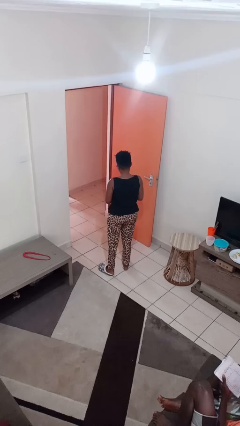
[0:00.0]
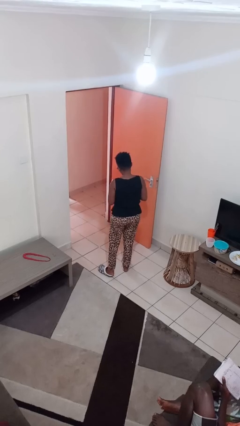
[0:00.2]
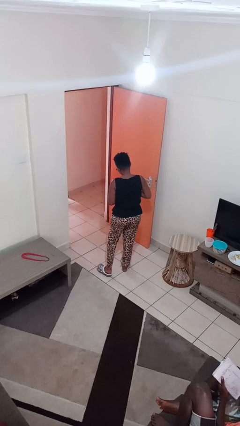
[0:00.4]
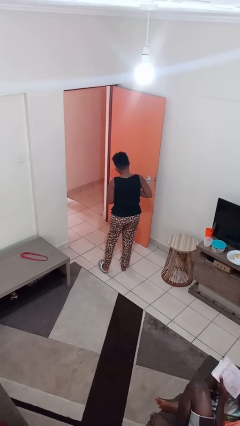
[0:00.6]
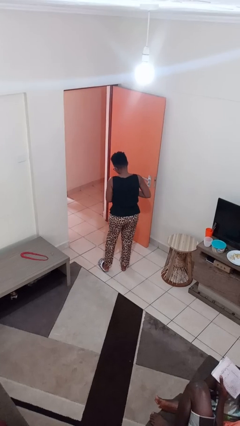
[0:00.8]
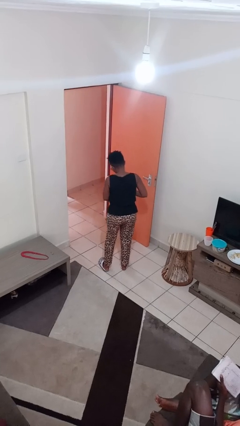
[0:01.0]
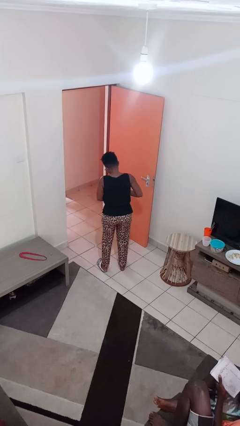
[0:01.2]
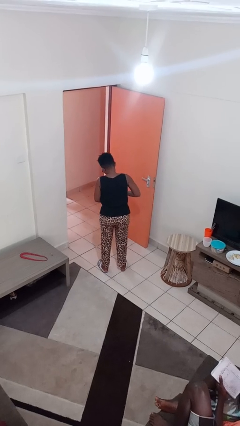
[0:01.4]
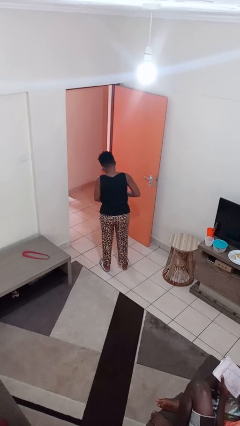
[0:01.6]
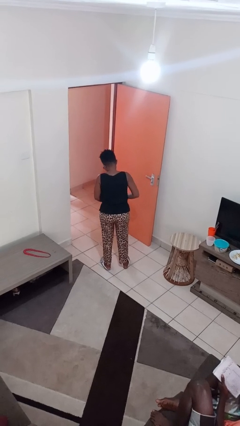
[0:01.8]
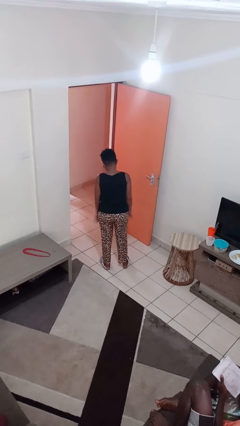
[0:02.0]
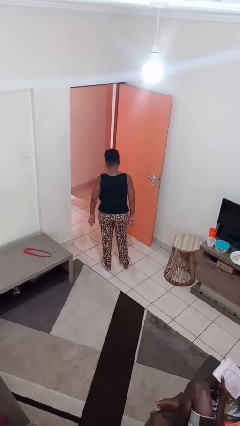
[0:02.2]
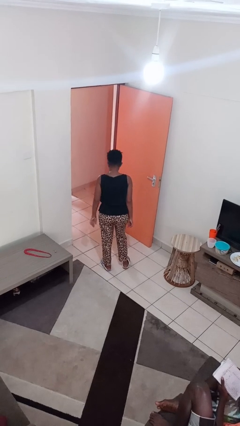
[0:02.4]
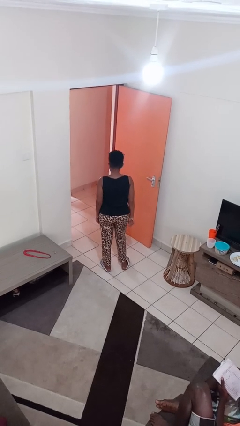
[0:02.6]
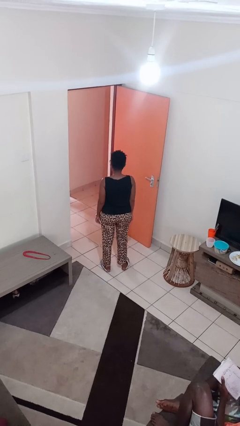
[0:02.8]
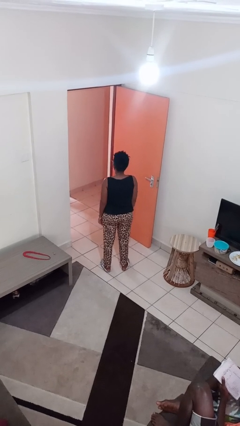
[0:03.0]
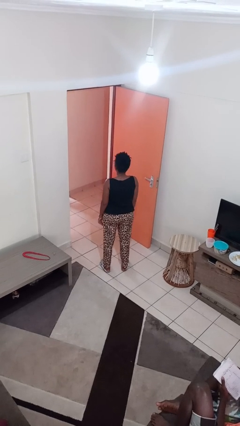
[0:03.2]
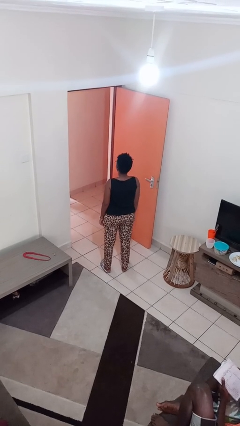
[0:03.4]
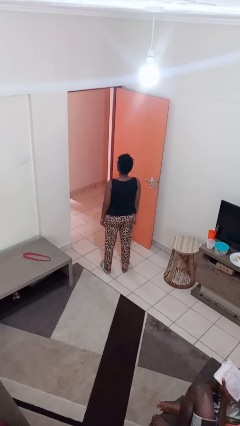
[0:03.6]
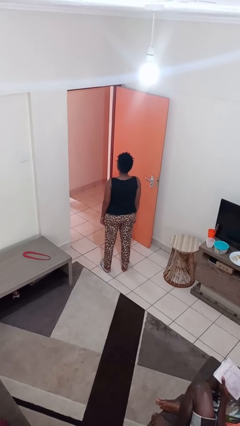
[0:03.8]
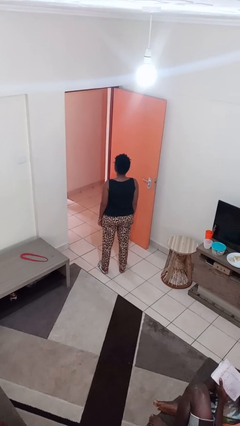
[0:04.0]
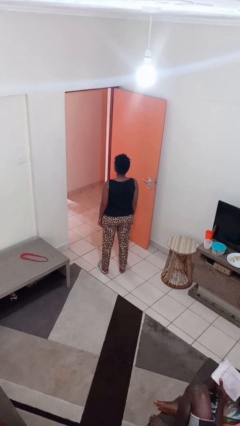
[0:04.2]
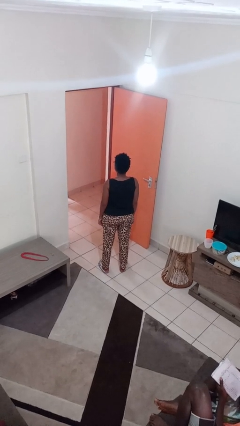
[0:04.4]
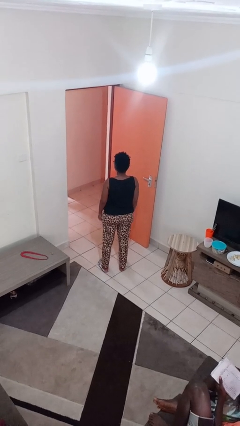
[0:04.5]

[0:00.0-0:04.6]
person puts on wristwatch

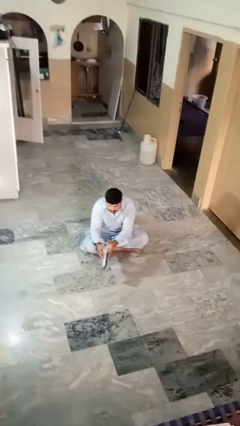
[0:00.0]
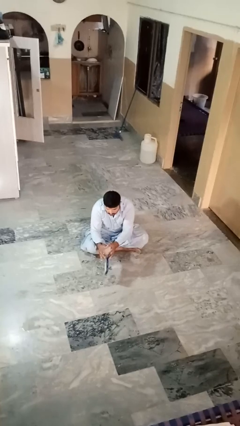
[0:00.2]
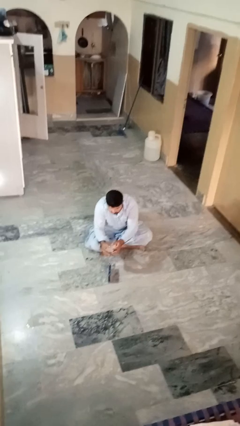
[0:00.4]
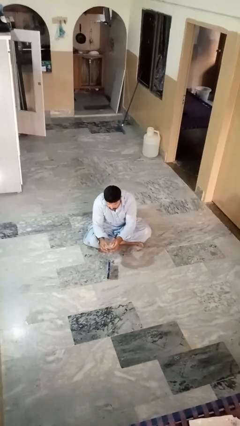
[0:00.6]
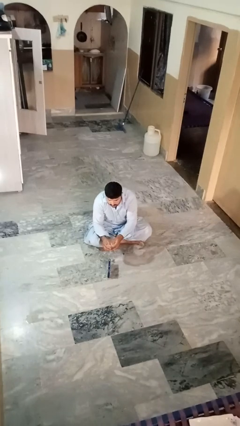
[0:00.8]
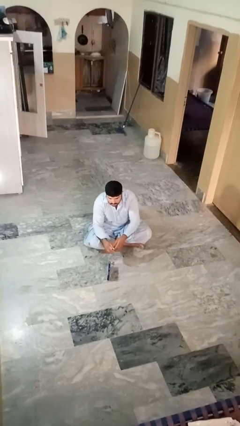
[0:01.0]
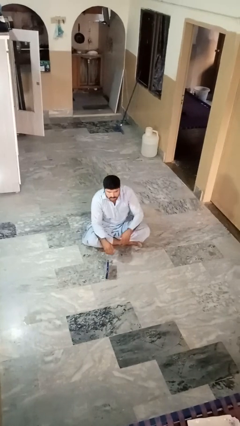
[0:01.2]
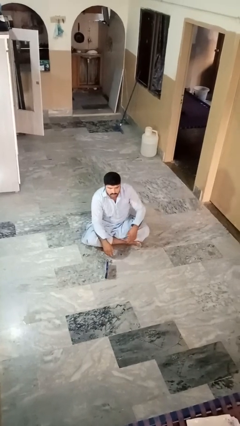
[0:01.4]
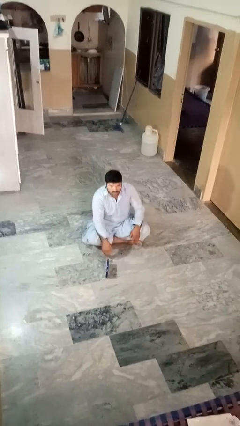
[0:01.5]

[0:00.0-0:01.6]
person catches dropped object

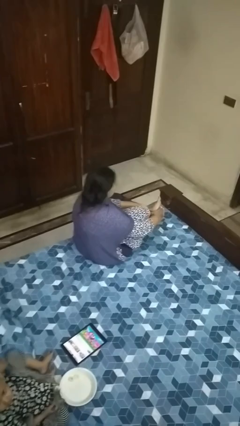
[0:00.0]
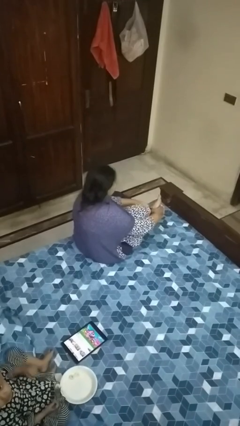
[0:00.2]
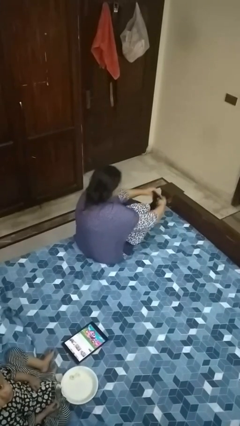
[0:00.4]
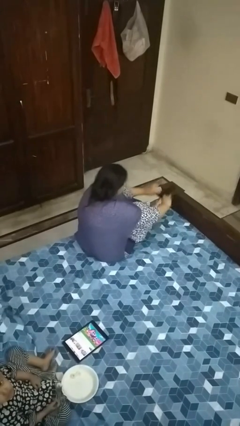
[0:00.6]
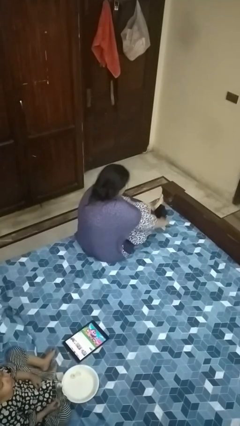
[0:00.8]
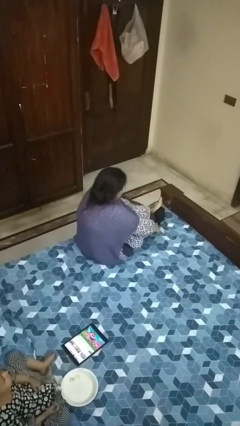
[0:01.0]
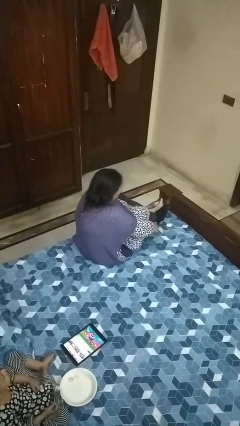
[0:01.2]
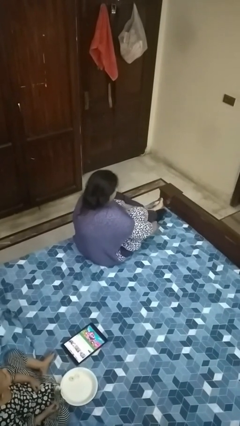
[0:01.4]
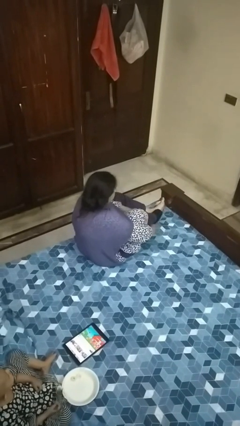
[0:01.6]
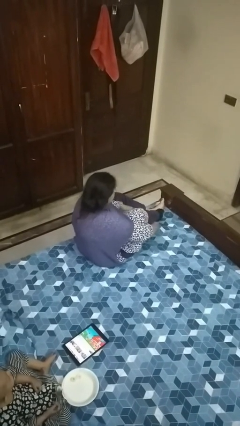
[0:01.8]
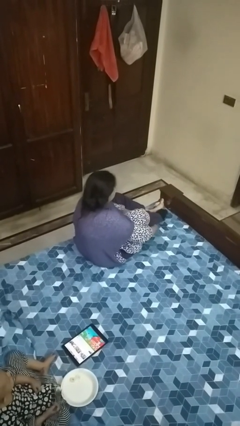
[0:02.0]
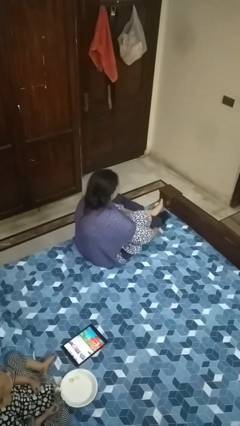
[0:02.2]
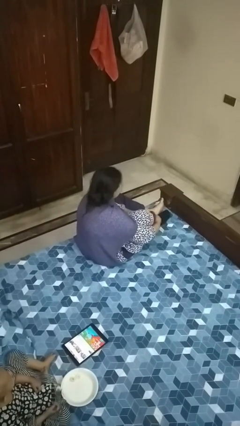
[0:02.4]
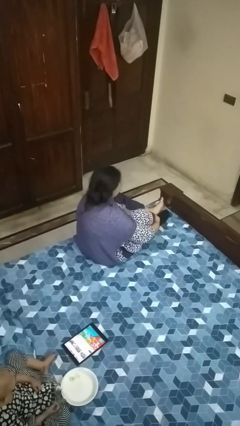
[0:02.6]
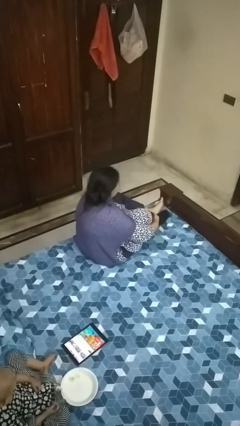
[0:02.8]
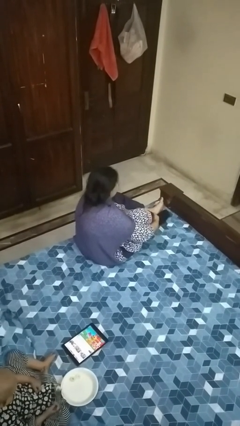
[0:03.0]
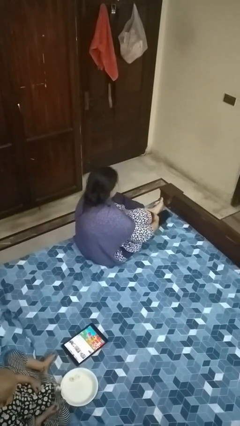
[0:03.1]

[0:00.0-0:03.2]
person puts on socks

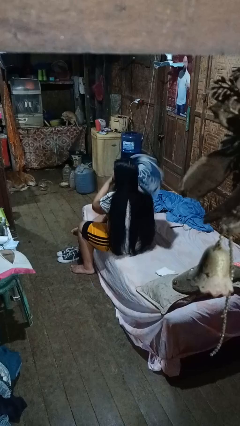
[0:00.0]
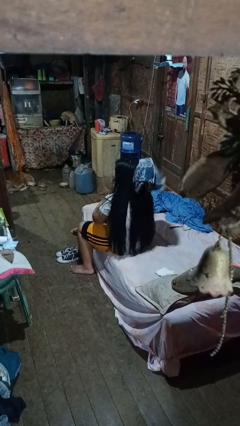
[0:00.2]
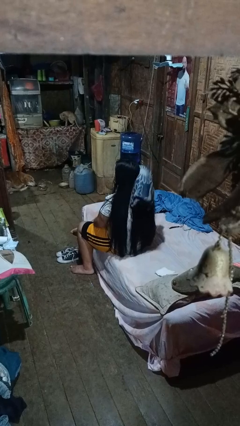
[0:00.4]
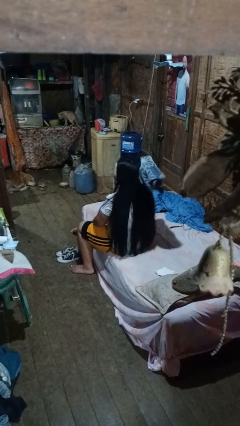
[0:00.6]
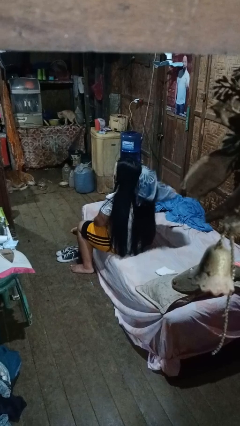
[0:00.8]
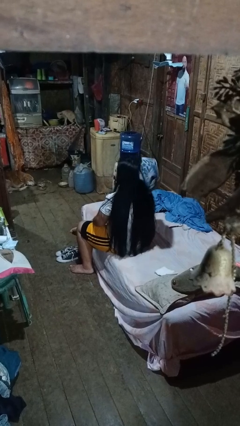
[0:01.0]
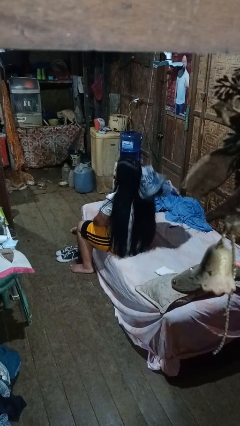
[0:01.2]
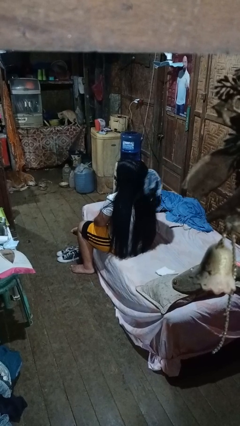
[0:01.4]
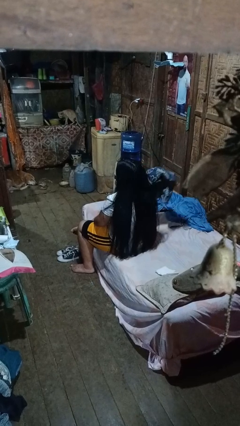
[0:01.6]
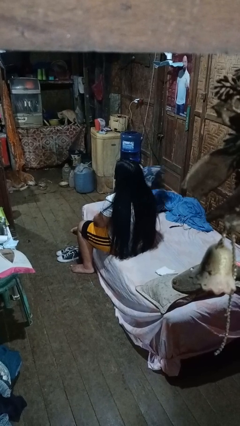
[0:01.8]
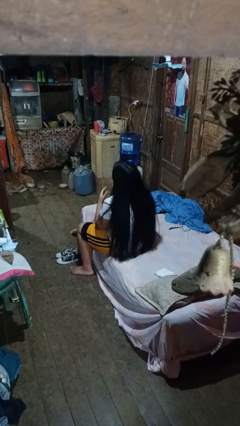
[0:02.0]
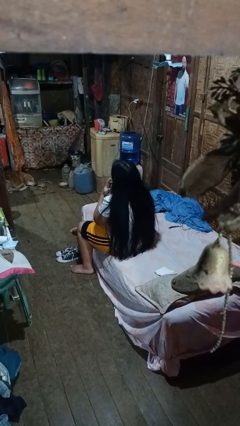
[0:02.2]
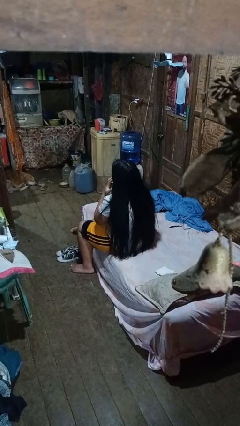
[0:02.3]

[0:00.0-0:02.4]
person dries hair with towel

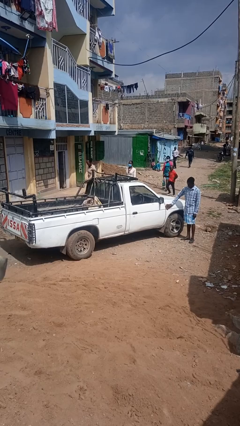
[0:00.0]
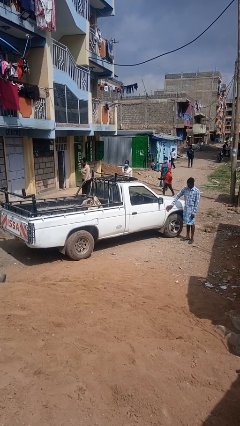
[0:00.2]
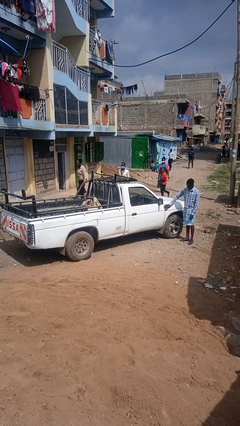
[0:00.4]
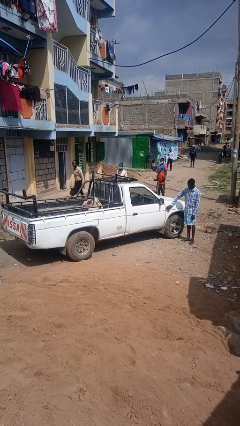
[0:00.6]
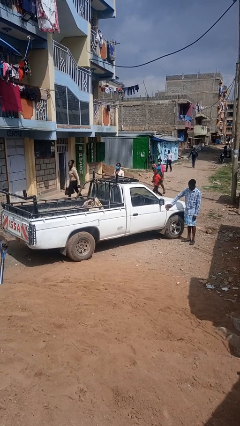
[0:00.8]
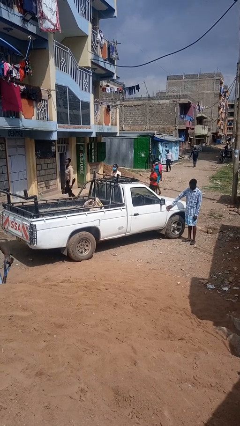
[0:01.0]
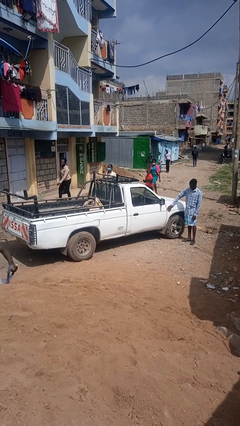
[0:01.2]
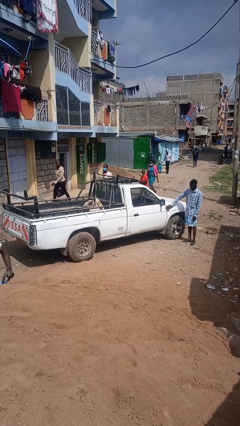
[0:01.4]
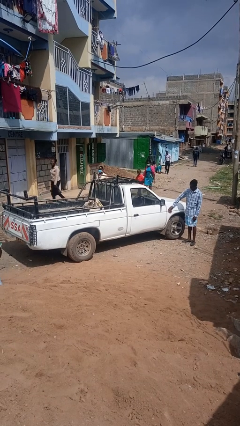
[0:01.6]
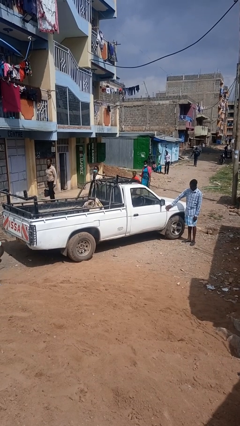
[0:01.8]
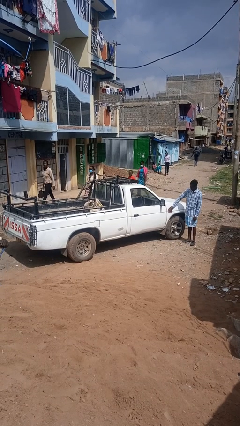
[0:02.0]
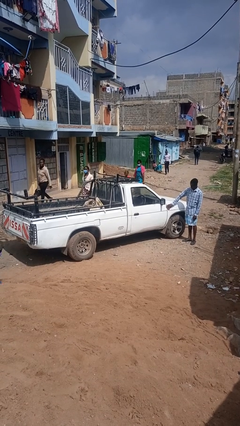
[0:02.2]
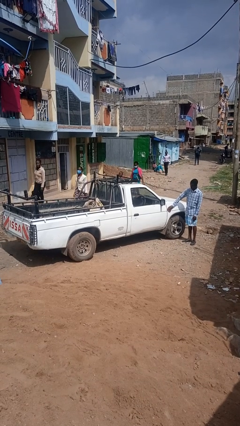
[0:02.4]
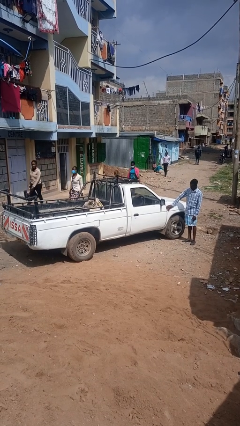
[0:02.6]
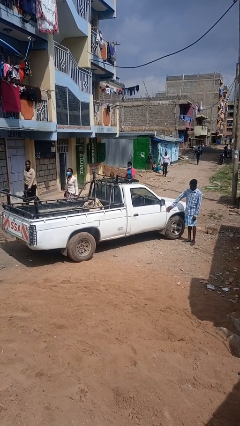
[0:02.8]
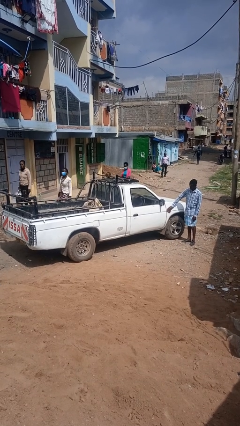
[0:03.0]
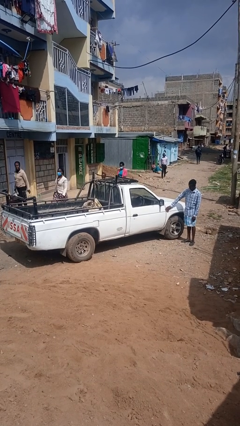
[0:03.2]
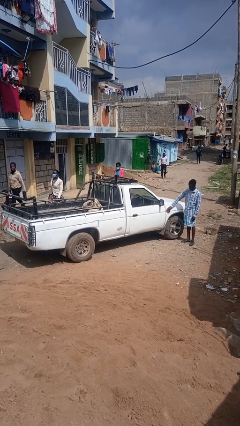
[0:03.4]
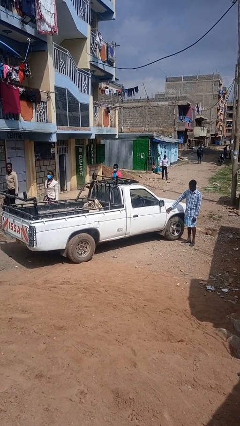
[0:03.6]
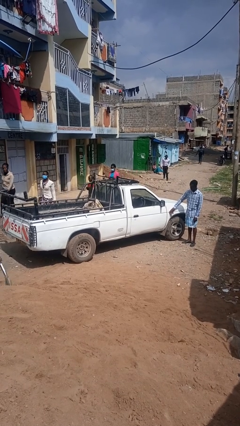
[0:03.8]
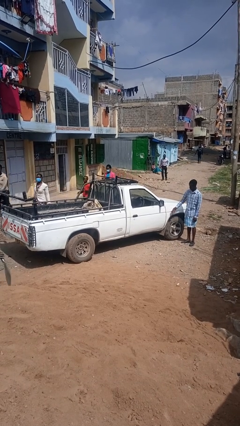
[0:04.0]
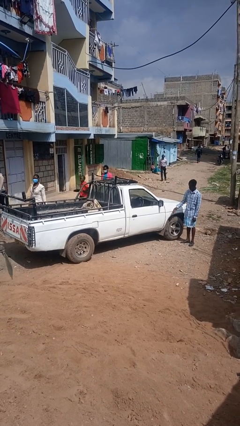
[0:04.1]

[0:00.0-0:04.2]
person polishes car with rag

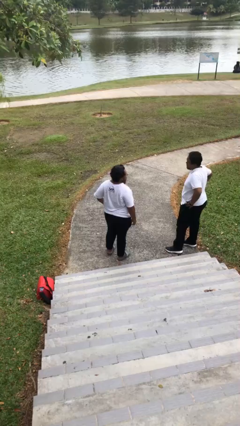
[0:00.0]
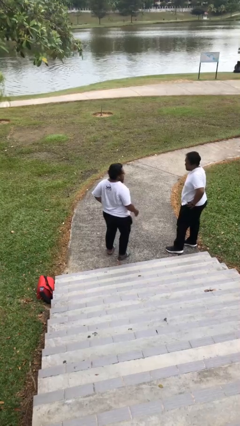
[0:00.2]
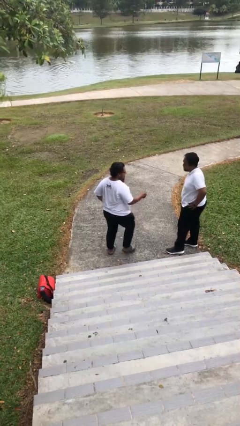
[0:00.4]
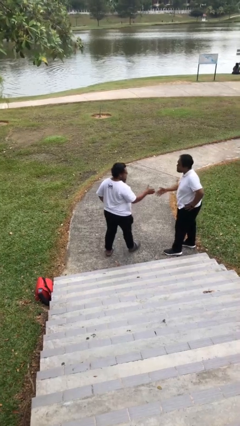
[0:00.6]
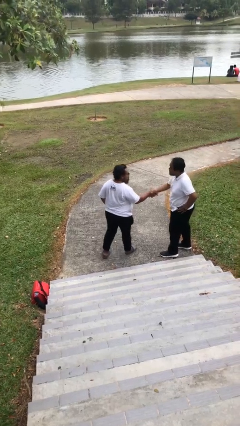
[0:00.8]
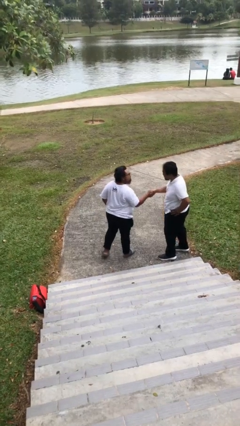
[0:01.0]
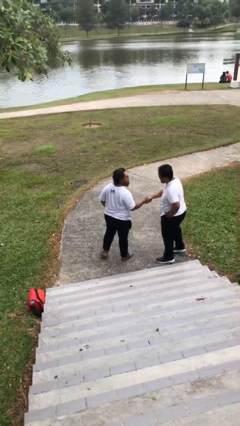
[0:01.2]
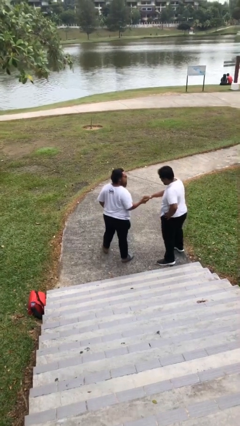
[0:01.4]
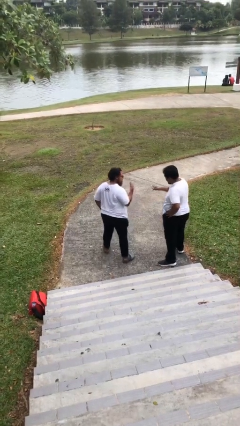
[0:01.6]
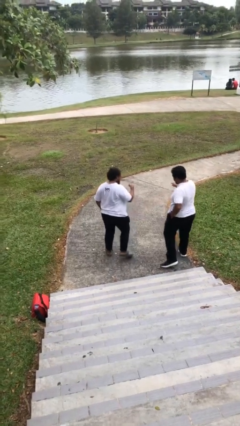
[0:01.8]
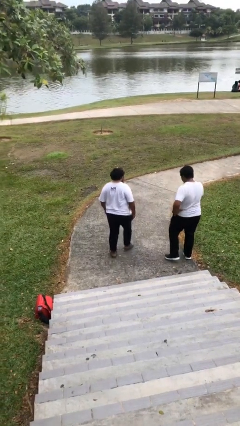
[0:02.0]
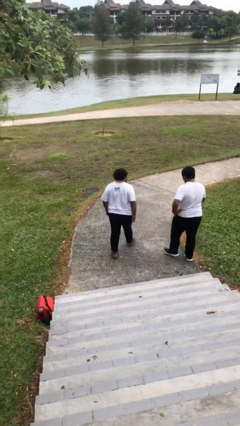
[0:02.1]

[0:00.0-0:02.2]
person shakes hand
